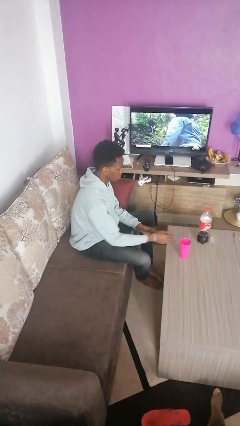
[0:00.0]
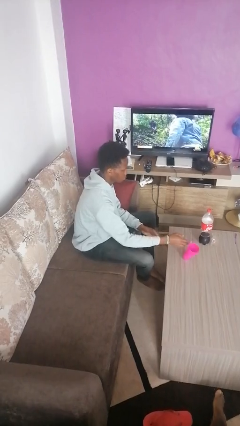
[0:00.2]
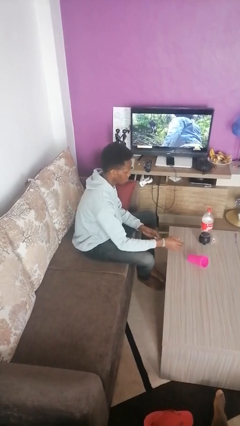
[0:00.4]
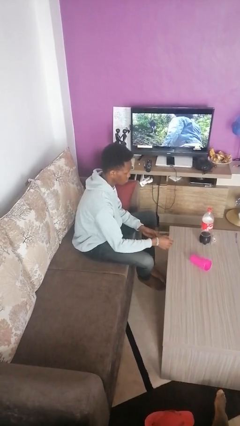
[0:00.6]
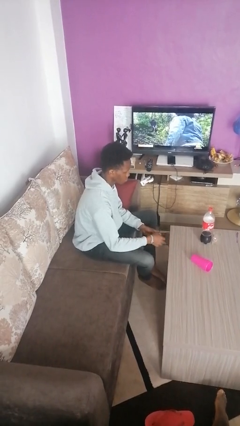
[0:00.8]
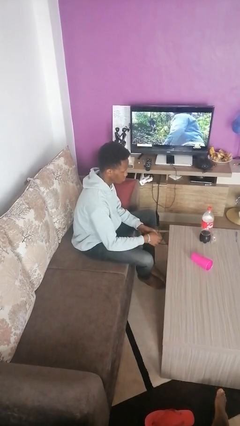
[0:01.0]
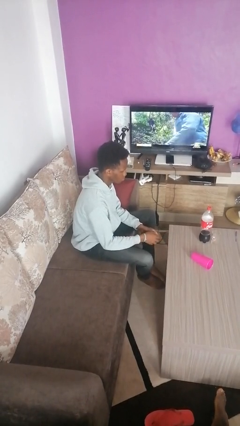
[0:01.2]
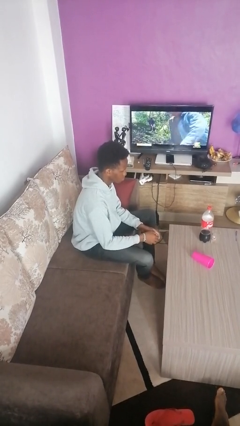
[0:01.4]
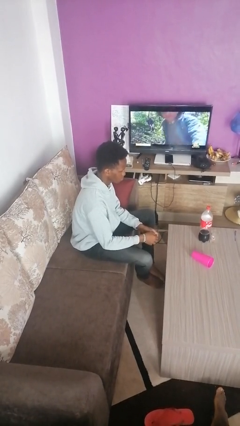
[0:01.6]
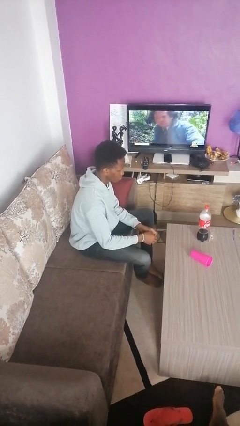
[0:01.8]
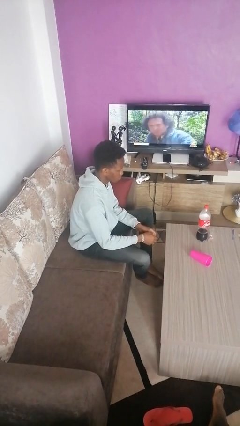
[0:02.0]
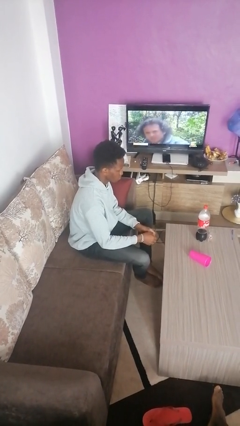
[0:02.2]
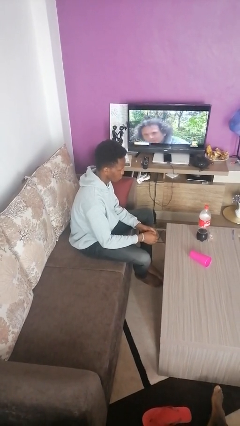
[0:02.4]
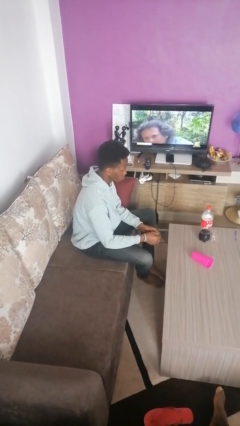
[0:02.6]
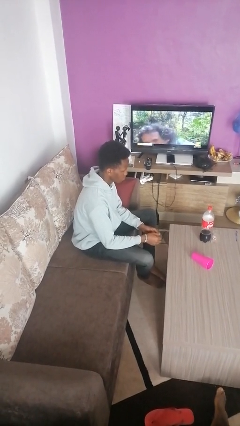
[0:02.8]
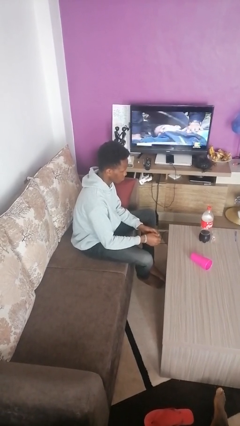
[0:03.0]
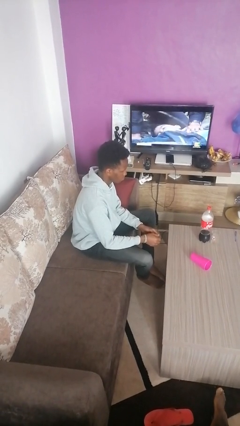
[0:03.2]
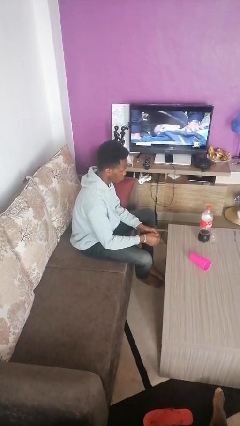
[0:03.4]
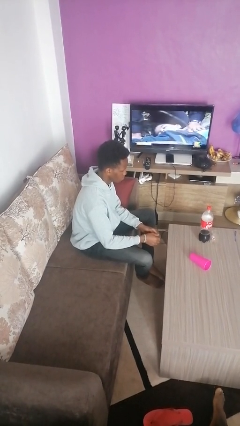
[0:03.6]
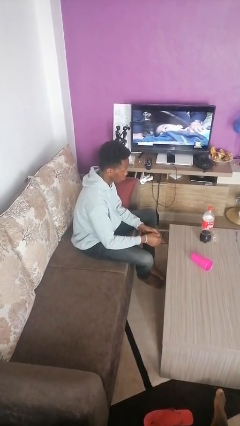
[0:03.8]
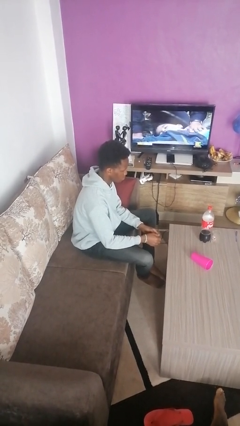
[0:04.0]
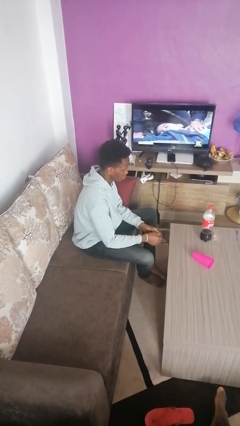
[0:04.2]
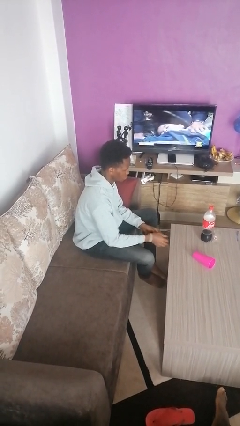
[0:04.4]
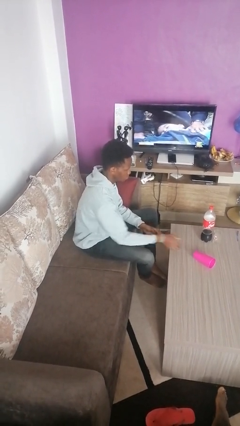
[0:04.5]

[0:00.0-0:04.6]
person knocks over glass

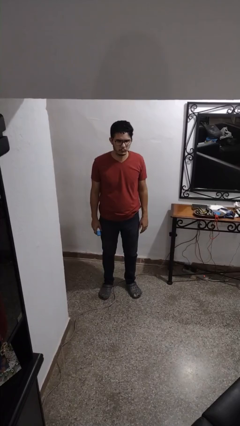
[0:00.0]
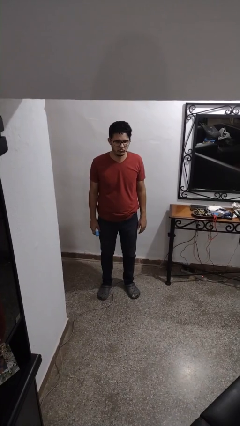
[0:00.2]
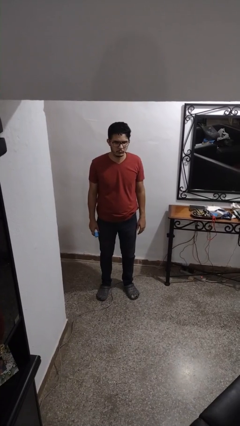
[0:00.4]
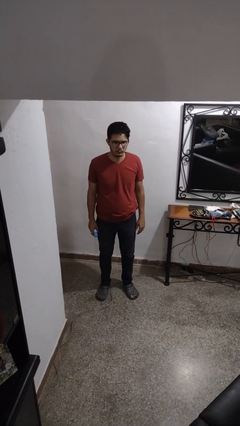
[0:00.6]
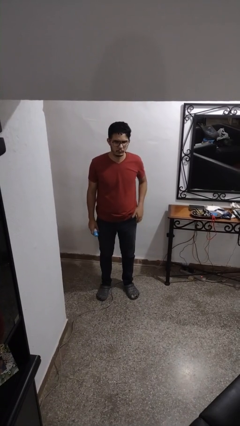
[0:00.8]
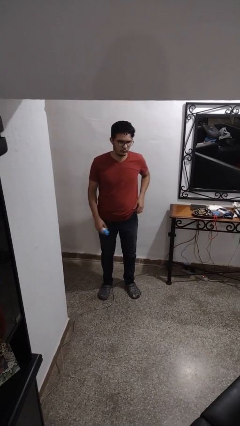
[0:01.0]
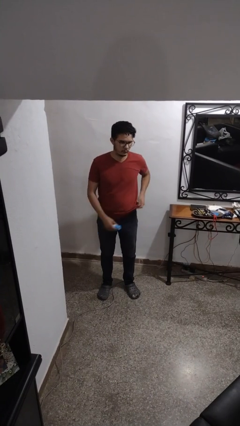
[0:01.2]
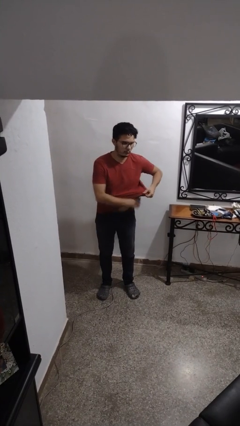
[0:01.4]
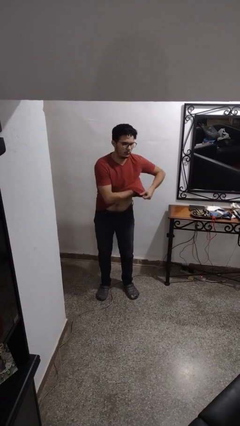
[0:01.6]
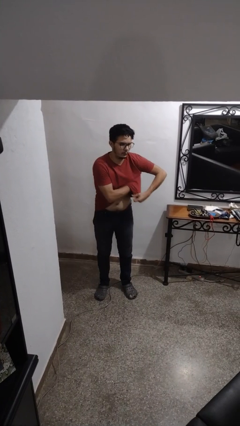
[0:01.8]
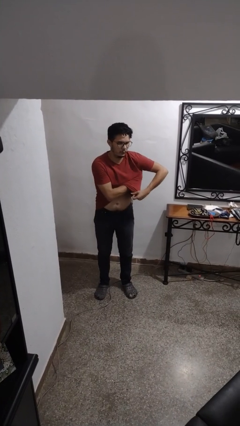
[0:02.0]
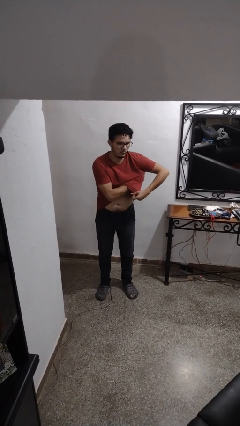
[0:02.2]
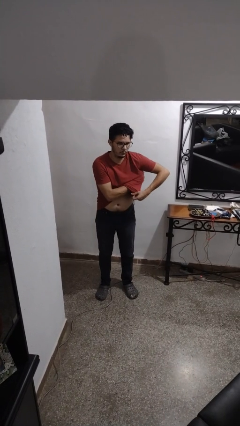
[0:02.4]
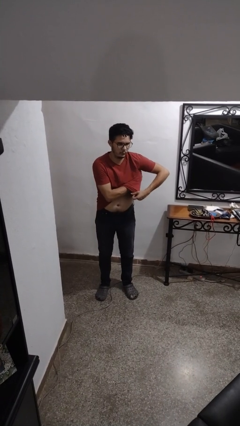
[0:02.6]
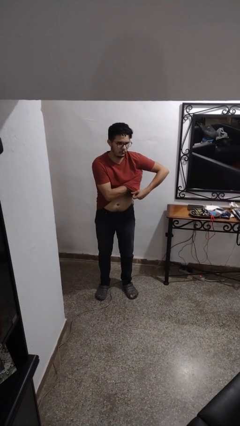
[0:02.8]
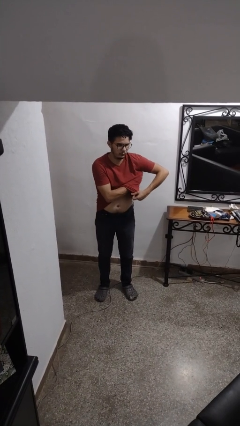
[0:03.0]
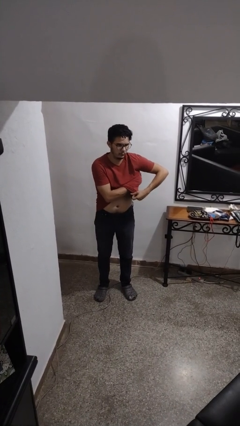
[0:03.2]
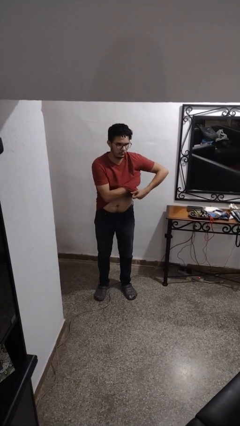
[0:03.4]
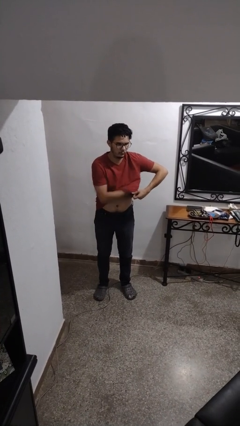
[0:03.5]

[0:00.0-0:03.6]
person applies deodorant

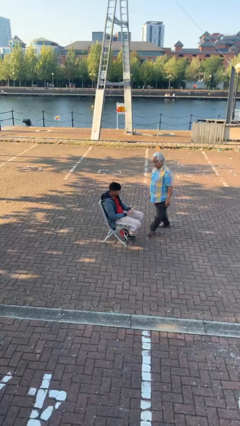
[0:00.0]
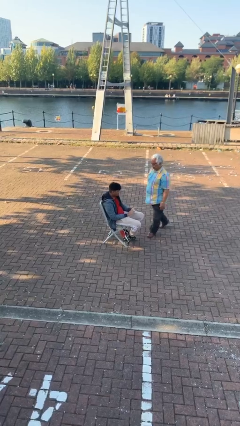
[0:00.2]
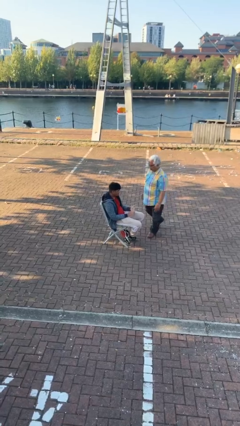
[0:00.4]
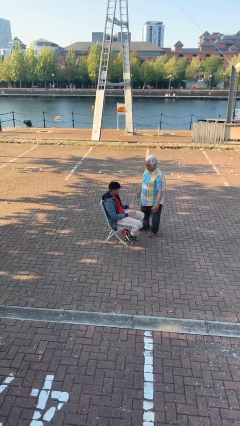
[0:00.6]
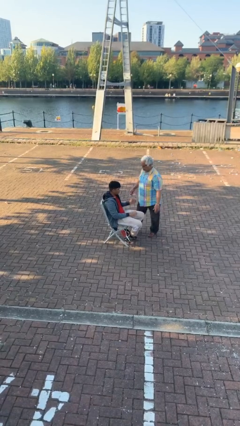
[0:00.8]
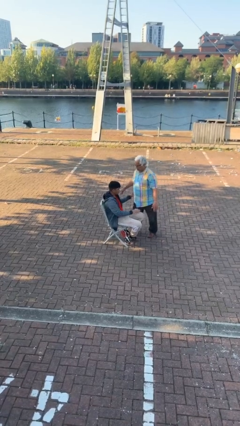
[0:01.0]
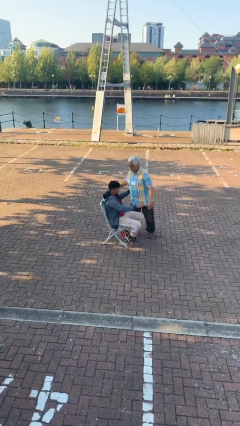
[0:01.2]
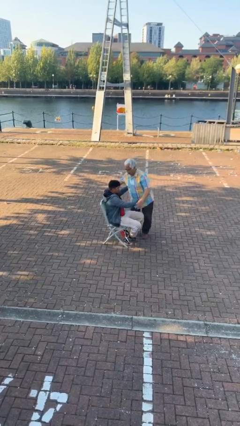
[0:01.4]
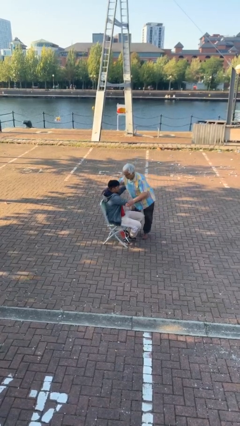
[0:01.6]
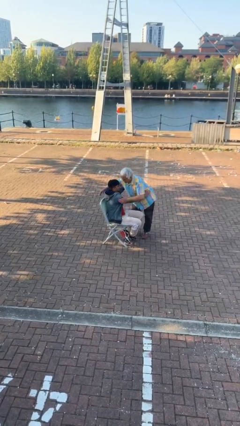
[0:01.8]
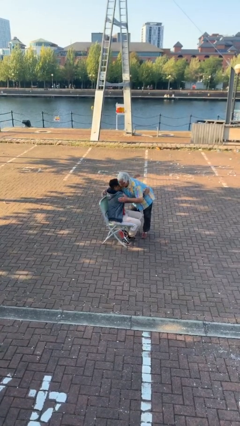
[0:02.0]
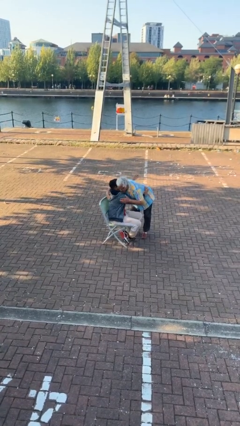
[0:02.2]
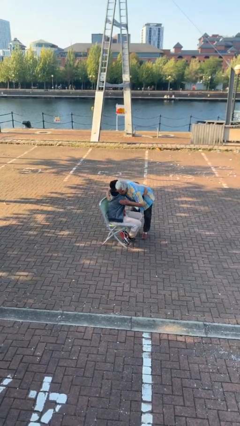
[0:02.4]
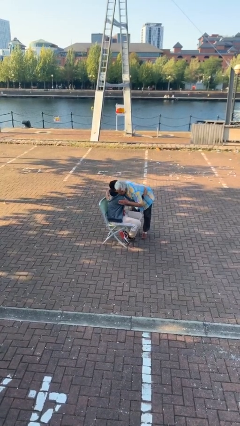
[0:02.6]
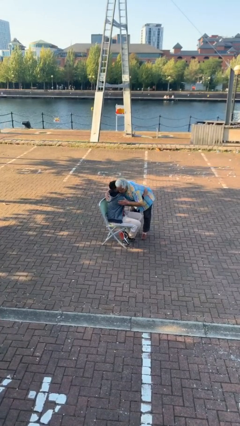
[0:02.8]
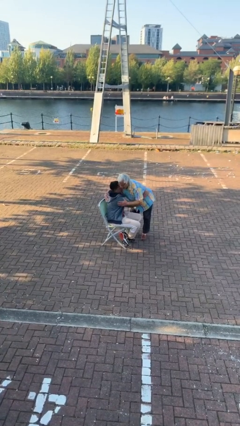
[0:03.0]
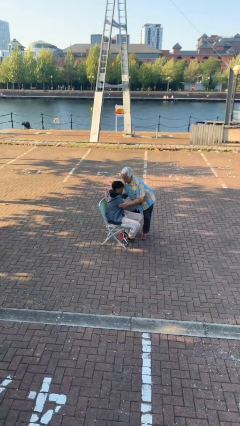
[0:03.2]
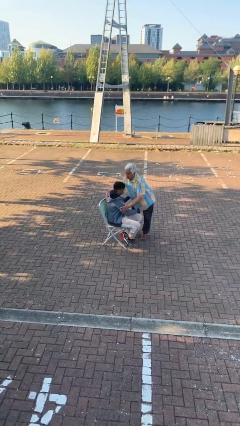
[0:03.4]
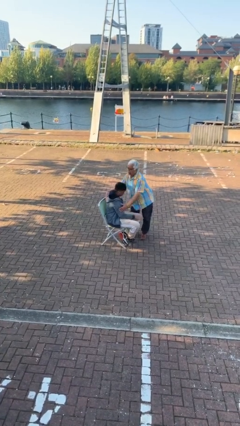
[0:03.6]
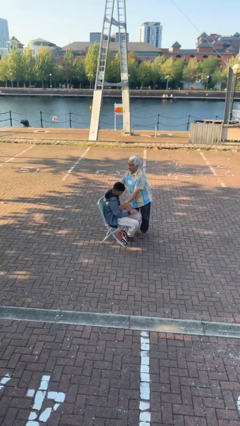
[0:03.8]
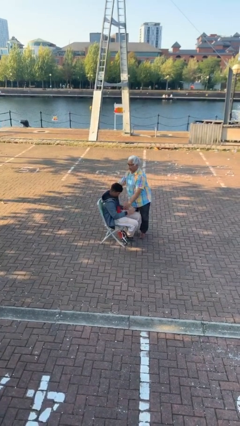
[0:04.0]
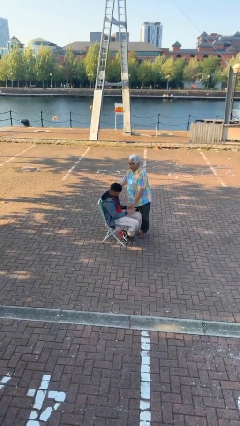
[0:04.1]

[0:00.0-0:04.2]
person embraces person

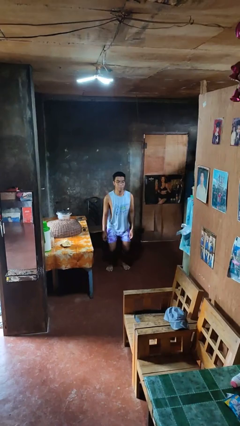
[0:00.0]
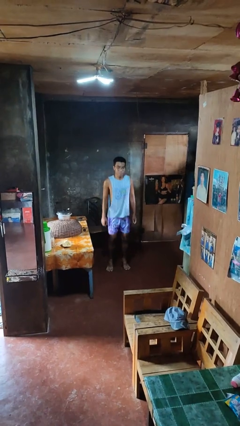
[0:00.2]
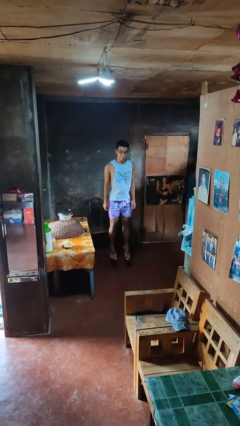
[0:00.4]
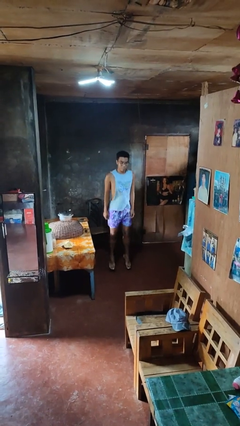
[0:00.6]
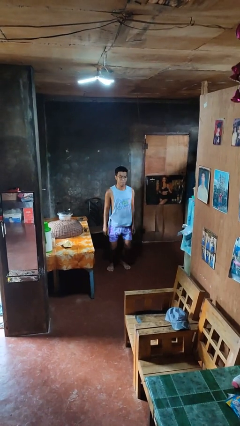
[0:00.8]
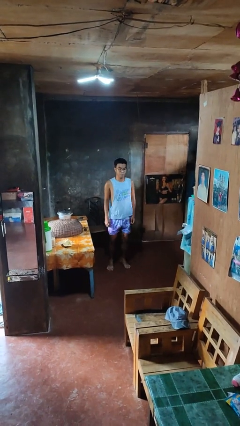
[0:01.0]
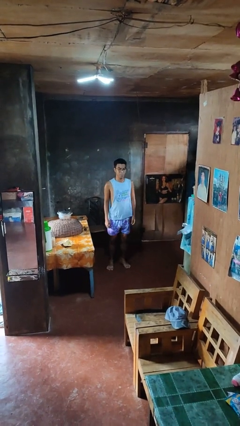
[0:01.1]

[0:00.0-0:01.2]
person jumps

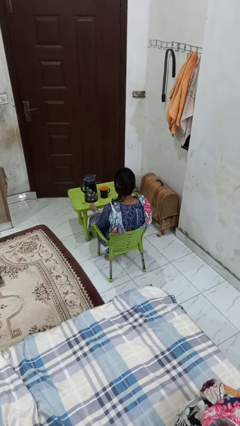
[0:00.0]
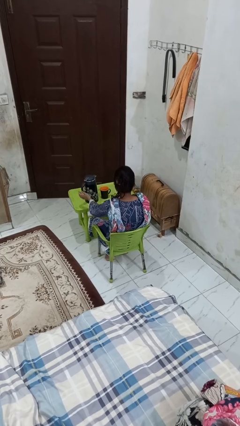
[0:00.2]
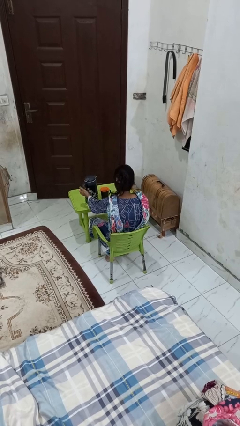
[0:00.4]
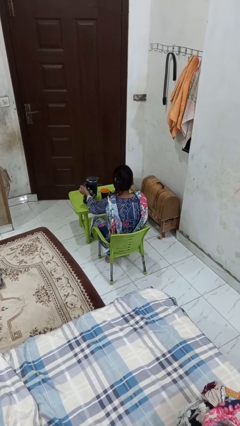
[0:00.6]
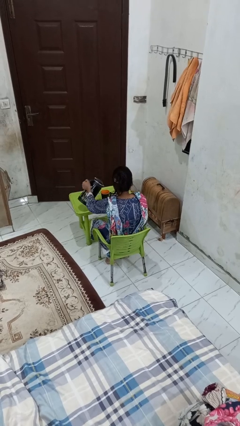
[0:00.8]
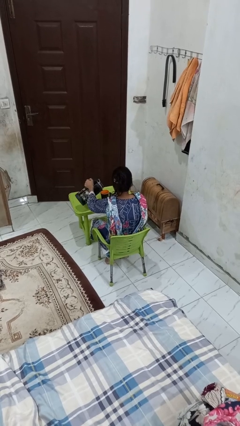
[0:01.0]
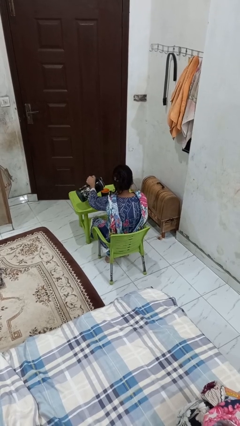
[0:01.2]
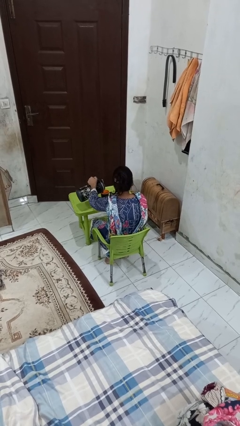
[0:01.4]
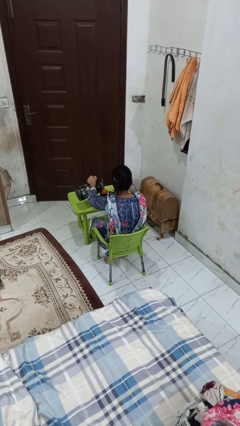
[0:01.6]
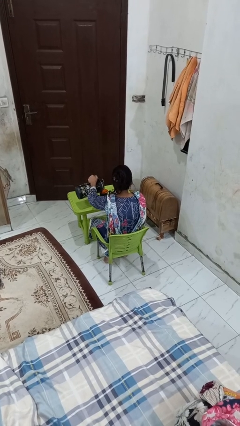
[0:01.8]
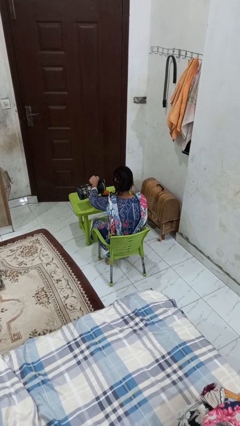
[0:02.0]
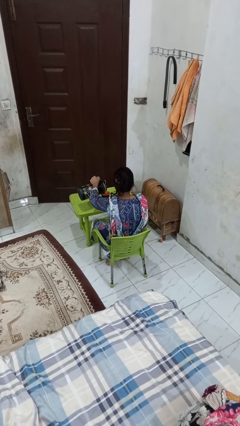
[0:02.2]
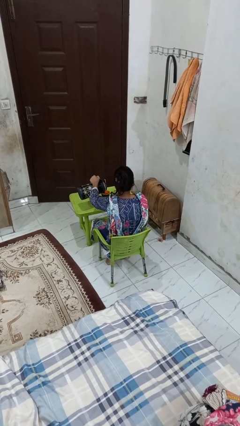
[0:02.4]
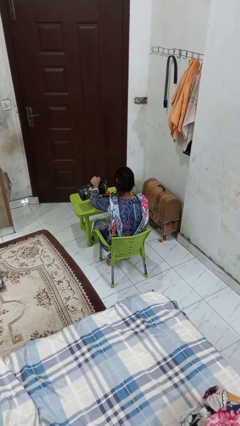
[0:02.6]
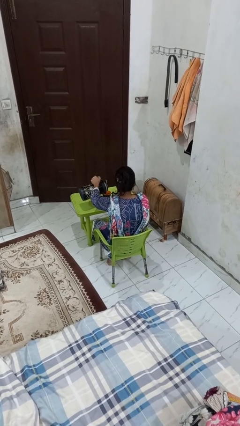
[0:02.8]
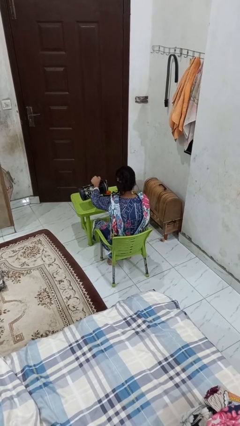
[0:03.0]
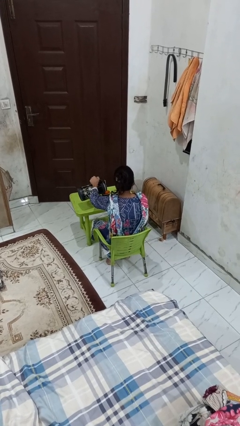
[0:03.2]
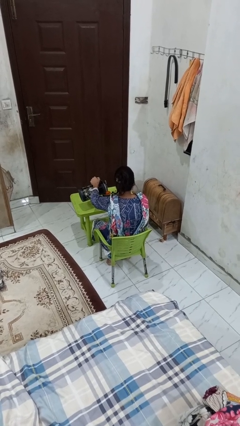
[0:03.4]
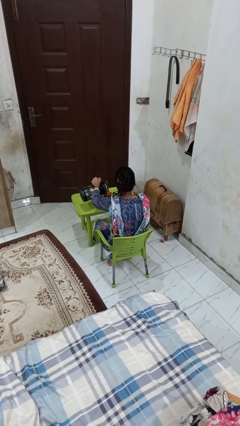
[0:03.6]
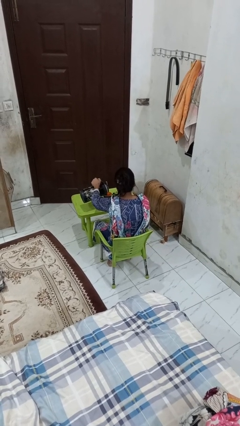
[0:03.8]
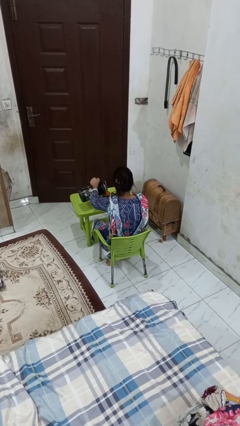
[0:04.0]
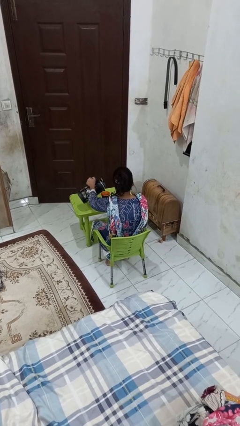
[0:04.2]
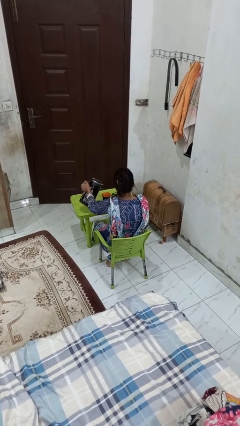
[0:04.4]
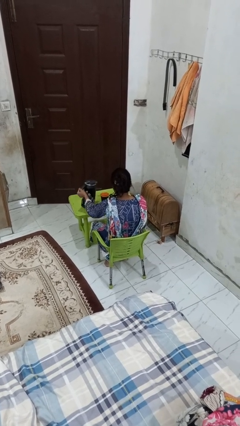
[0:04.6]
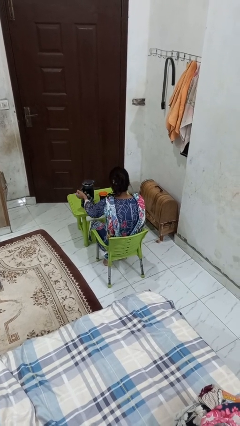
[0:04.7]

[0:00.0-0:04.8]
person pours coffee into mug
